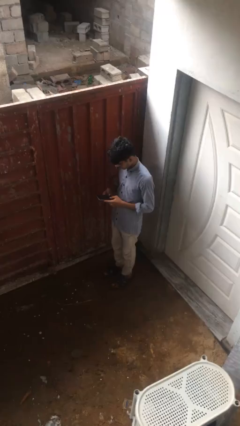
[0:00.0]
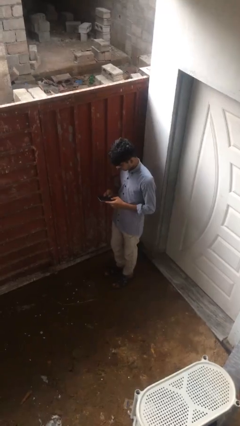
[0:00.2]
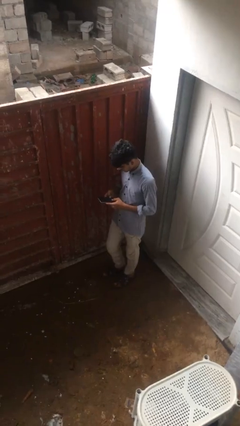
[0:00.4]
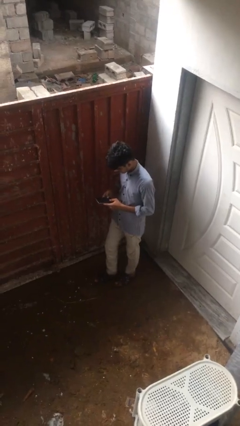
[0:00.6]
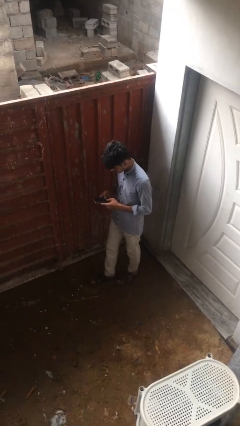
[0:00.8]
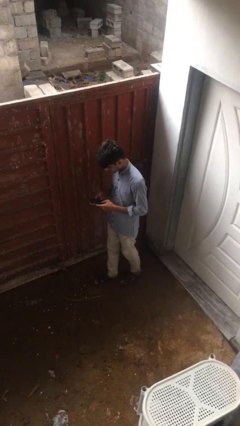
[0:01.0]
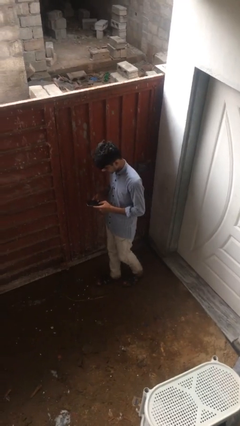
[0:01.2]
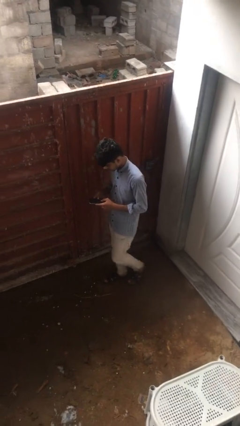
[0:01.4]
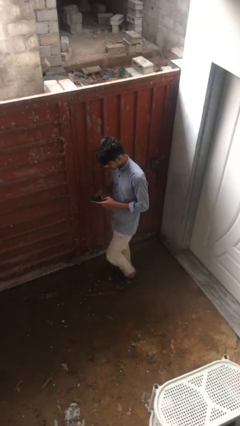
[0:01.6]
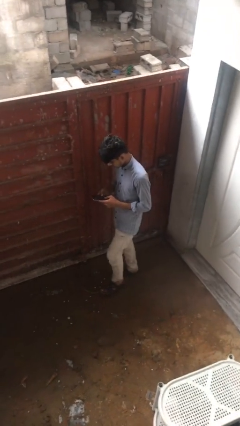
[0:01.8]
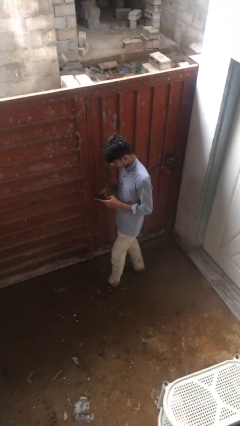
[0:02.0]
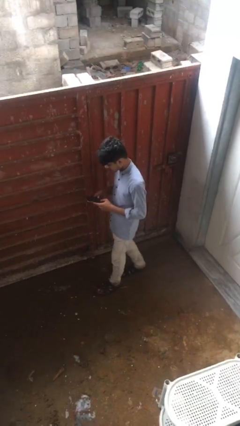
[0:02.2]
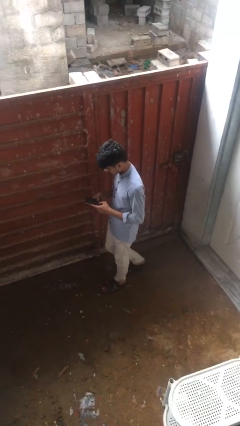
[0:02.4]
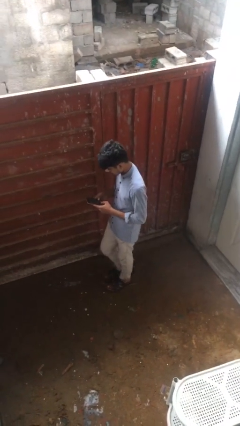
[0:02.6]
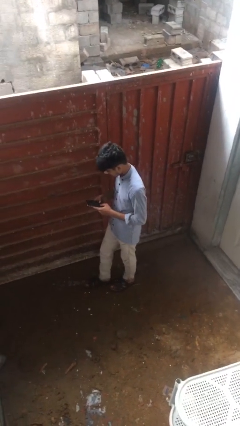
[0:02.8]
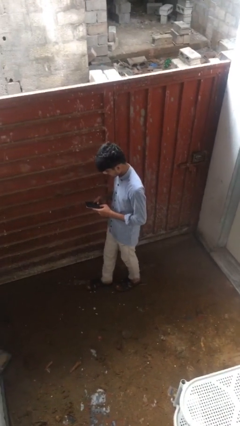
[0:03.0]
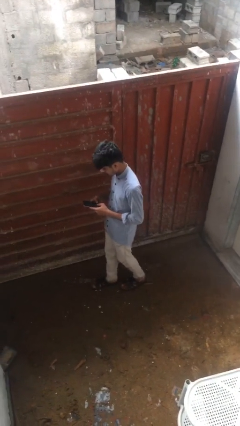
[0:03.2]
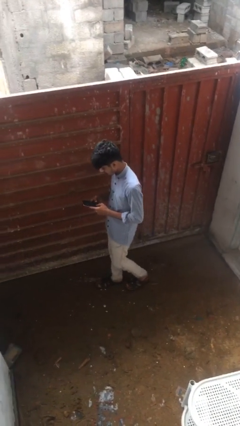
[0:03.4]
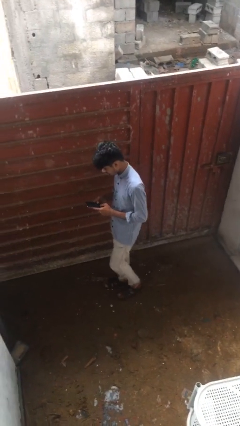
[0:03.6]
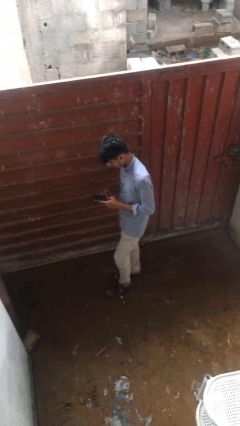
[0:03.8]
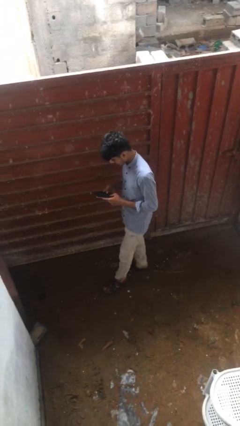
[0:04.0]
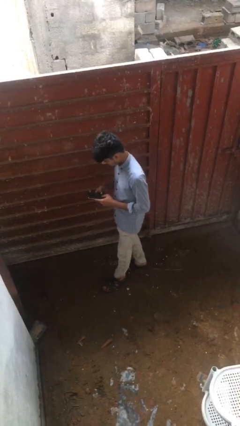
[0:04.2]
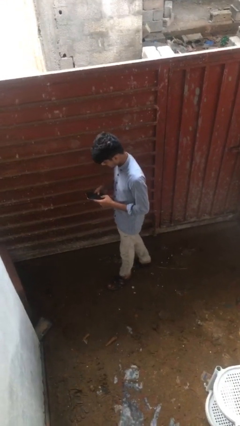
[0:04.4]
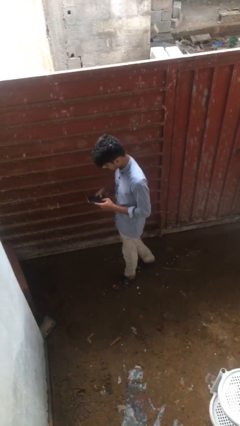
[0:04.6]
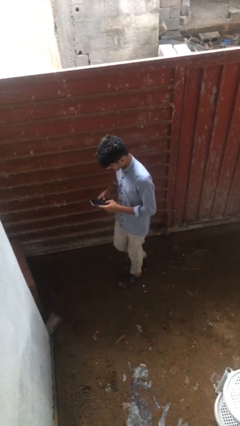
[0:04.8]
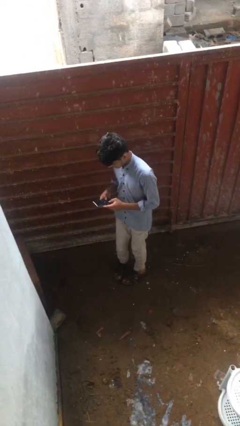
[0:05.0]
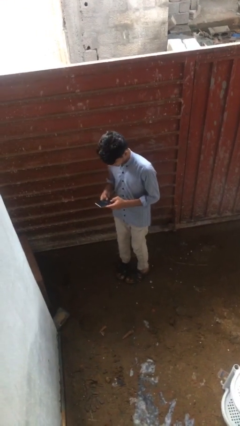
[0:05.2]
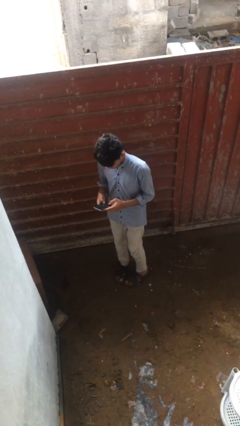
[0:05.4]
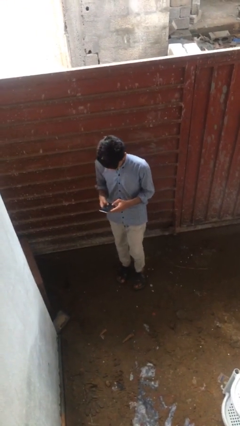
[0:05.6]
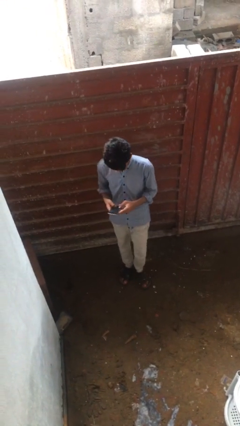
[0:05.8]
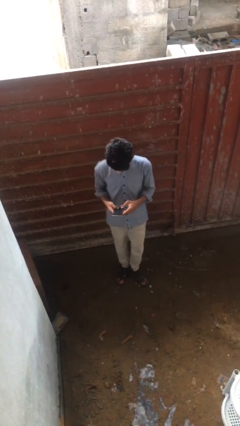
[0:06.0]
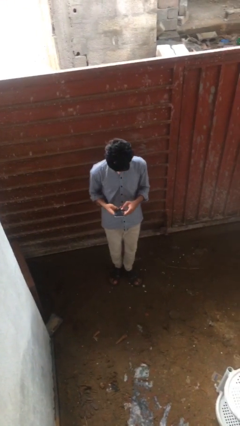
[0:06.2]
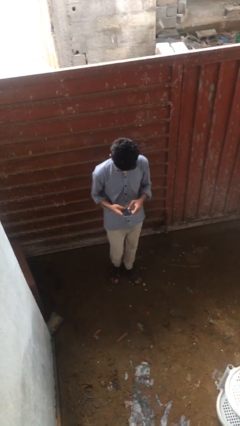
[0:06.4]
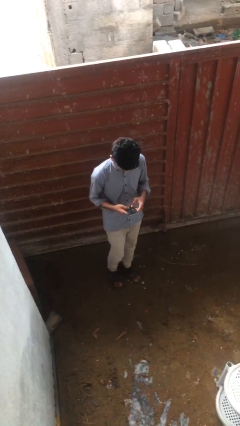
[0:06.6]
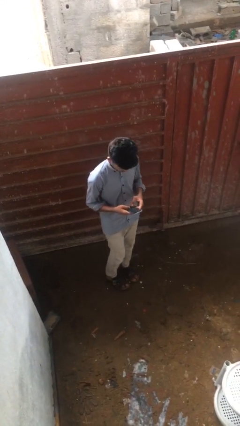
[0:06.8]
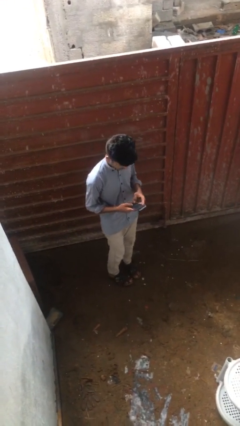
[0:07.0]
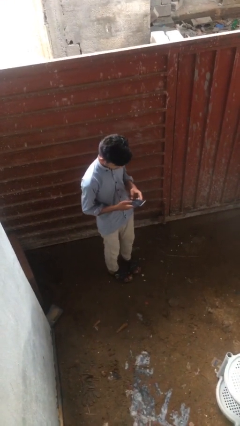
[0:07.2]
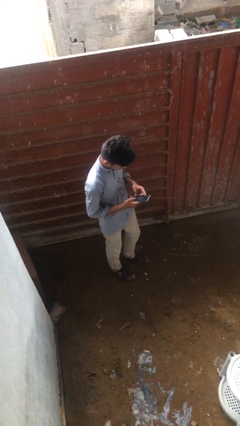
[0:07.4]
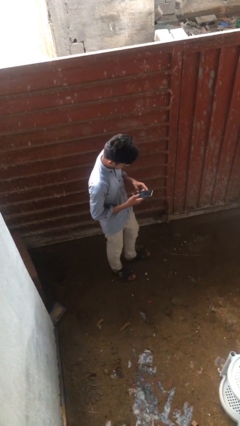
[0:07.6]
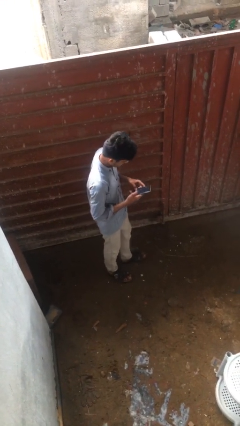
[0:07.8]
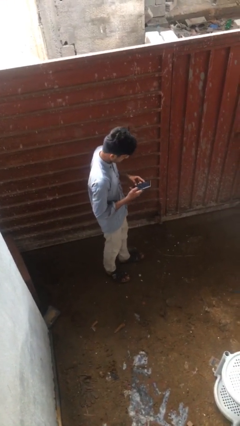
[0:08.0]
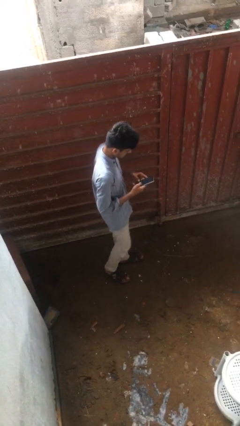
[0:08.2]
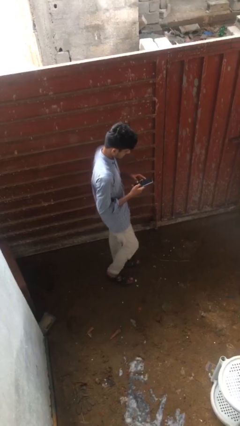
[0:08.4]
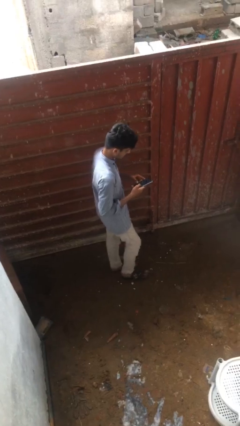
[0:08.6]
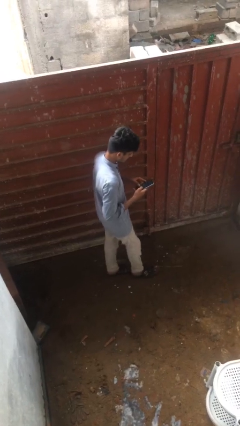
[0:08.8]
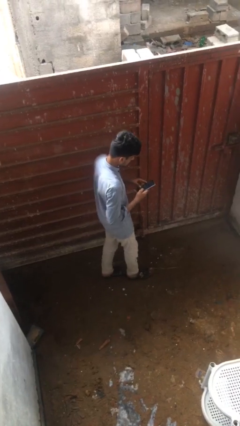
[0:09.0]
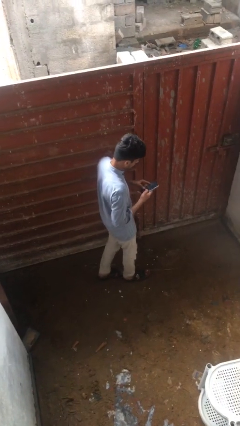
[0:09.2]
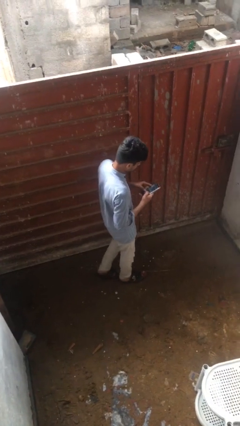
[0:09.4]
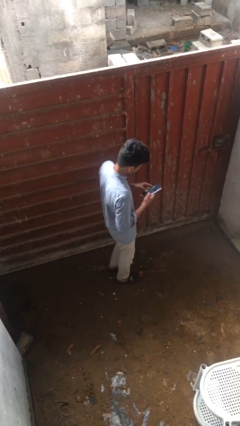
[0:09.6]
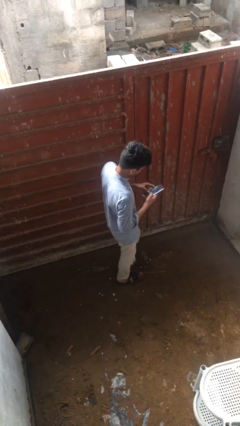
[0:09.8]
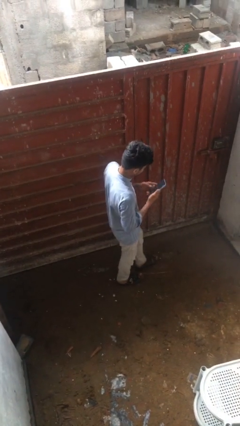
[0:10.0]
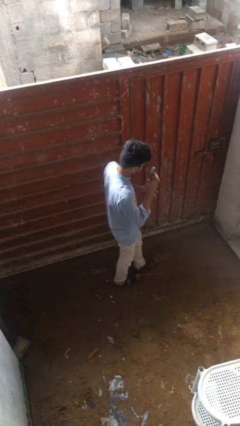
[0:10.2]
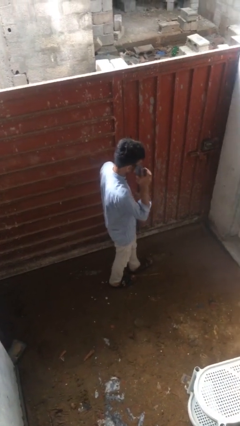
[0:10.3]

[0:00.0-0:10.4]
person texts on phone

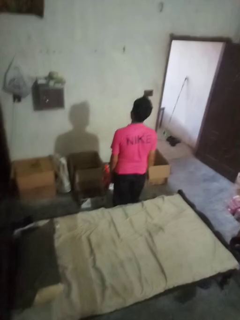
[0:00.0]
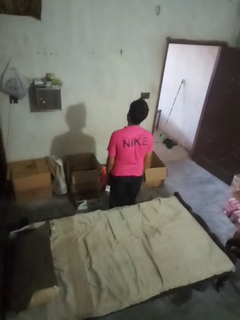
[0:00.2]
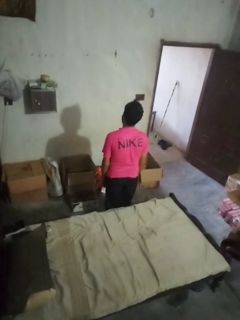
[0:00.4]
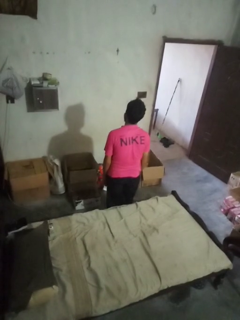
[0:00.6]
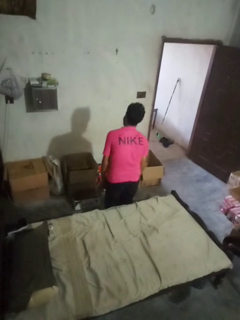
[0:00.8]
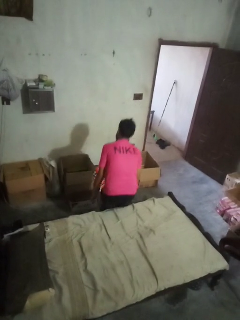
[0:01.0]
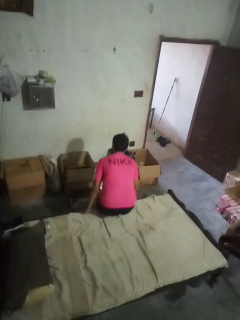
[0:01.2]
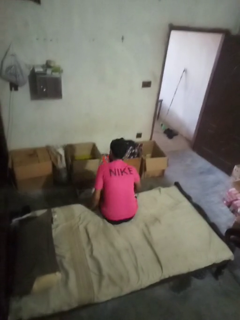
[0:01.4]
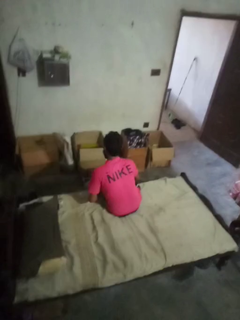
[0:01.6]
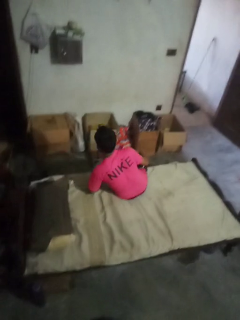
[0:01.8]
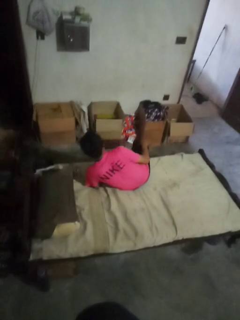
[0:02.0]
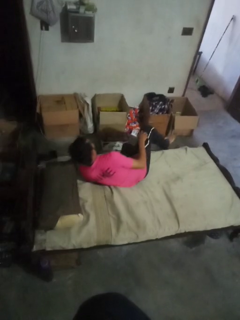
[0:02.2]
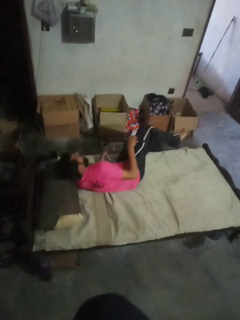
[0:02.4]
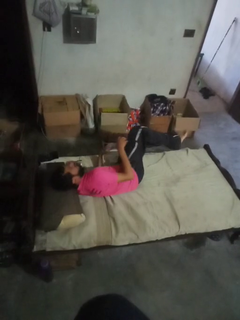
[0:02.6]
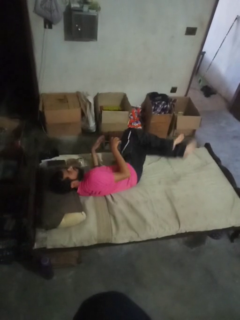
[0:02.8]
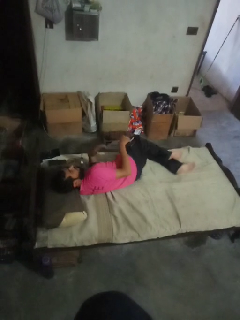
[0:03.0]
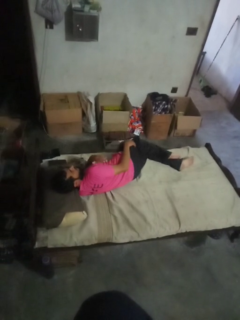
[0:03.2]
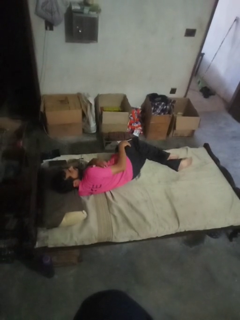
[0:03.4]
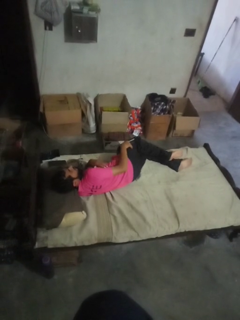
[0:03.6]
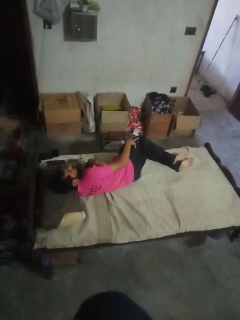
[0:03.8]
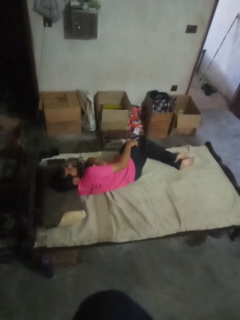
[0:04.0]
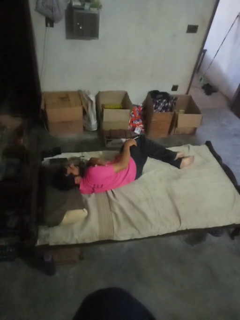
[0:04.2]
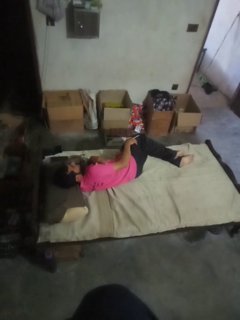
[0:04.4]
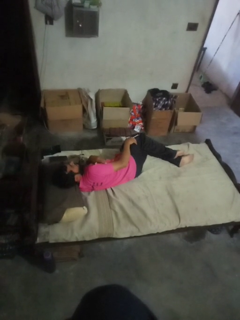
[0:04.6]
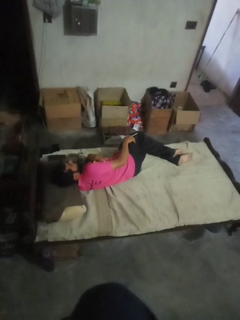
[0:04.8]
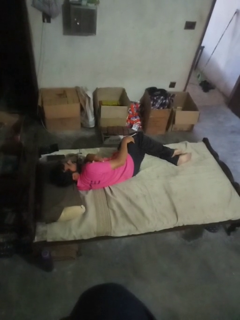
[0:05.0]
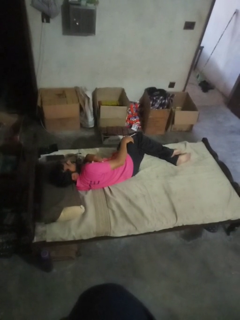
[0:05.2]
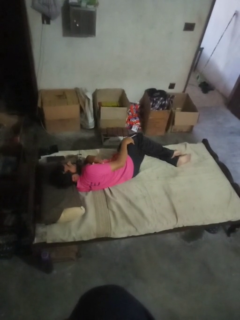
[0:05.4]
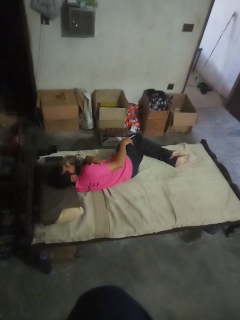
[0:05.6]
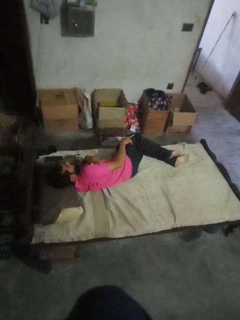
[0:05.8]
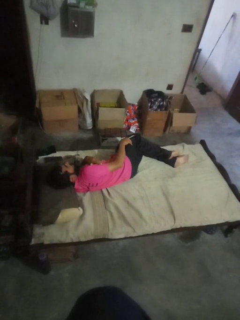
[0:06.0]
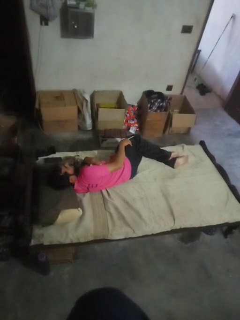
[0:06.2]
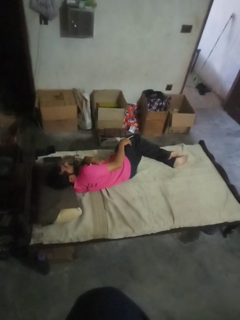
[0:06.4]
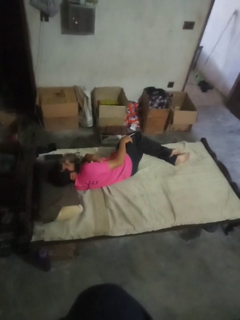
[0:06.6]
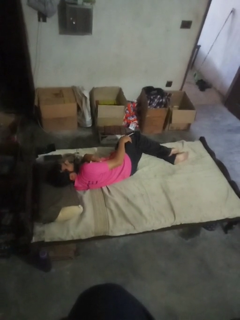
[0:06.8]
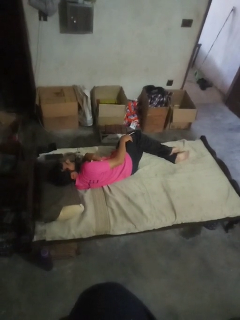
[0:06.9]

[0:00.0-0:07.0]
person lies down on bed

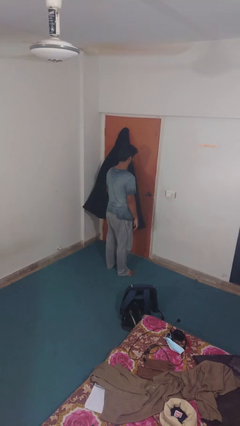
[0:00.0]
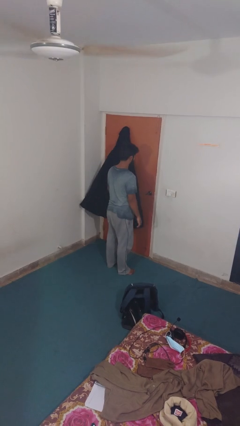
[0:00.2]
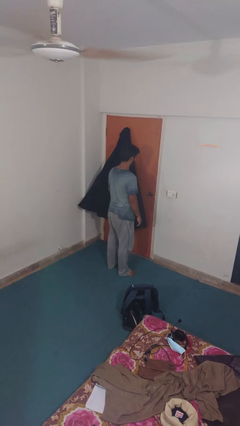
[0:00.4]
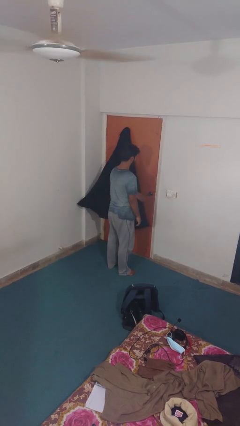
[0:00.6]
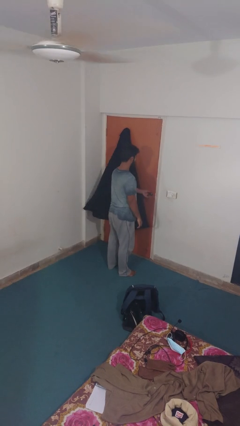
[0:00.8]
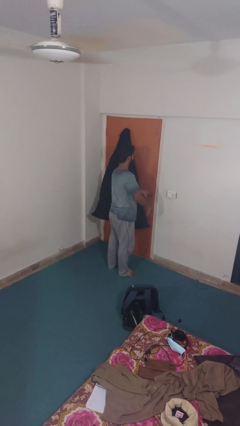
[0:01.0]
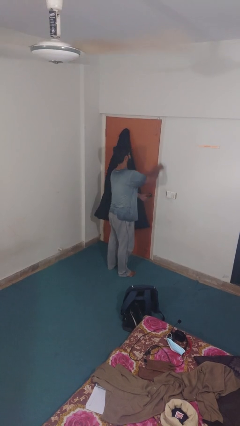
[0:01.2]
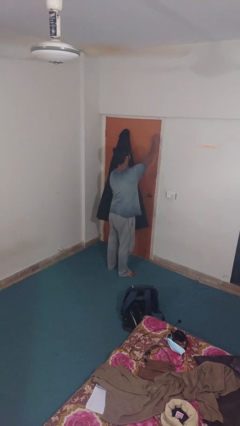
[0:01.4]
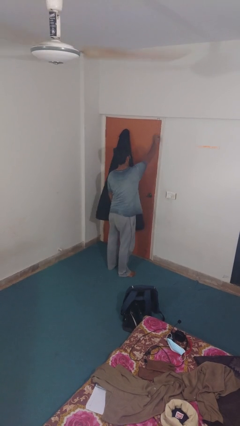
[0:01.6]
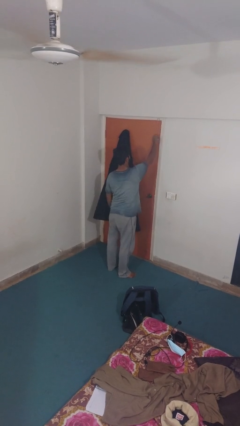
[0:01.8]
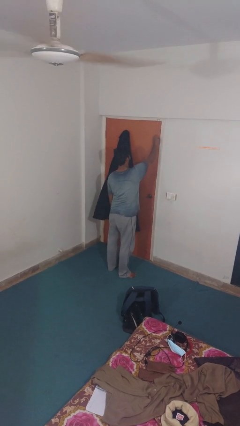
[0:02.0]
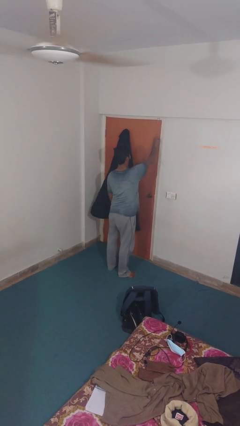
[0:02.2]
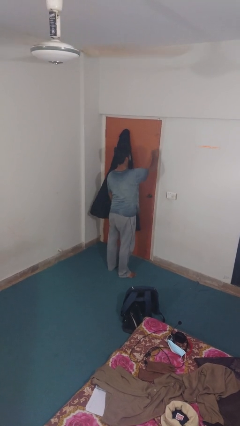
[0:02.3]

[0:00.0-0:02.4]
person unlocks door with keys
